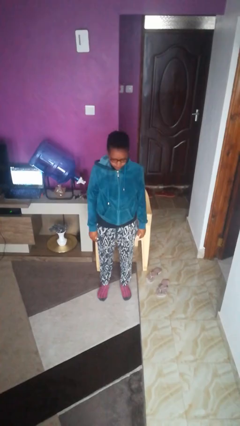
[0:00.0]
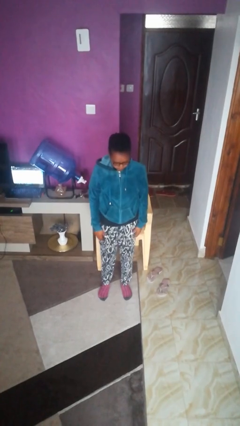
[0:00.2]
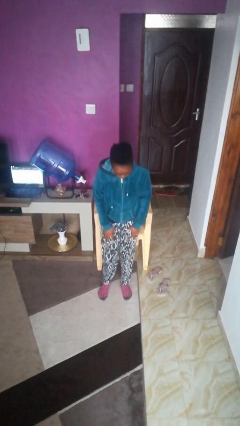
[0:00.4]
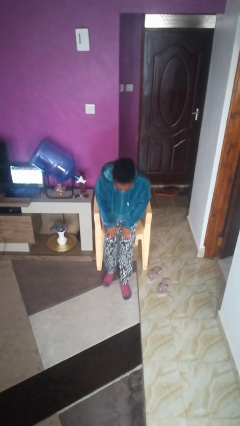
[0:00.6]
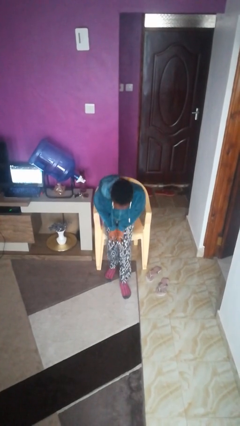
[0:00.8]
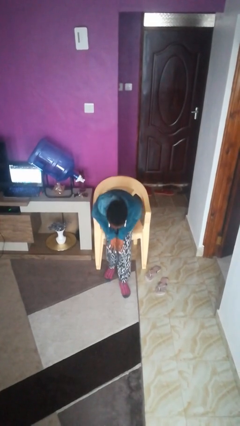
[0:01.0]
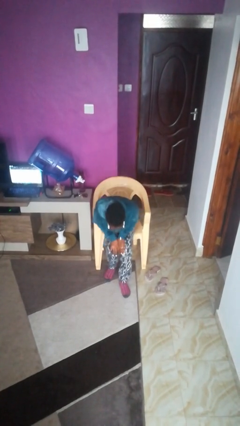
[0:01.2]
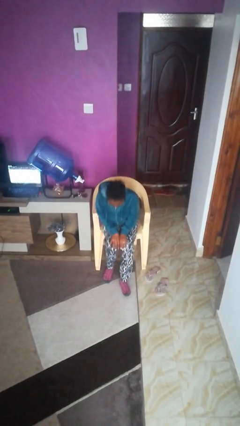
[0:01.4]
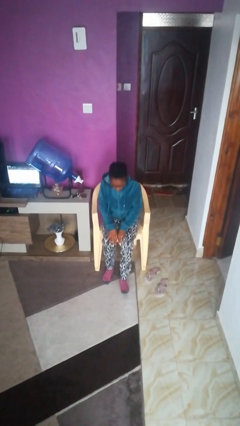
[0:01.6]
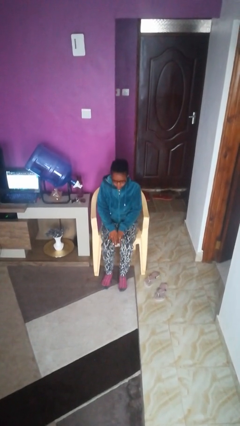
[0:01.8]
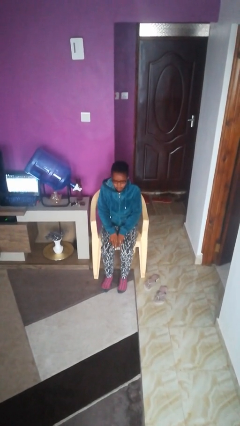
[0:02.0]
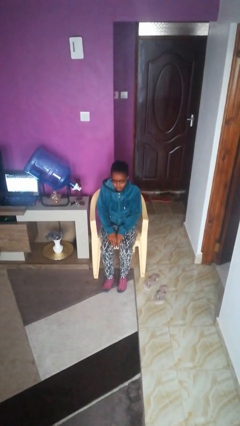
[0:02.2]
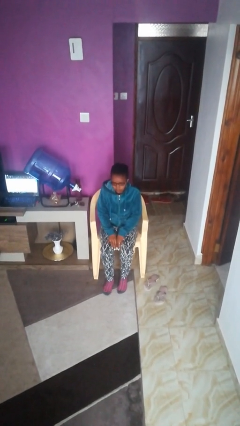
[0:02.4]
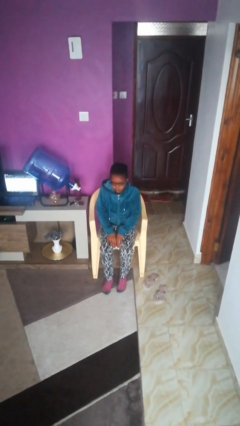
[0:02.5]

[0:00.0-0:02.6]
person sits down

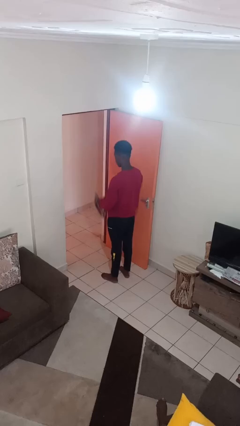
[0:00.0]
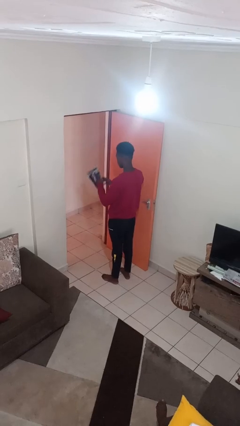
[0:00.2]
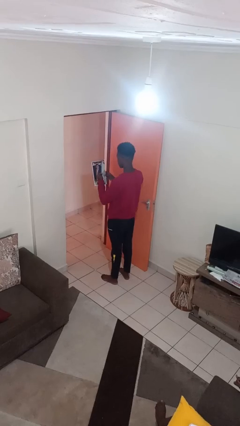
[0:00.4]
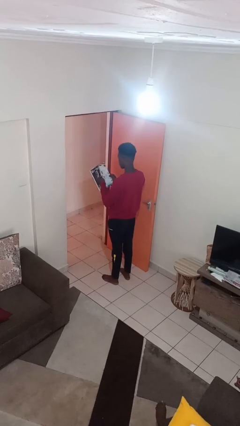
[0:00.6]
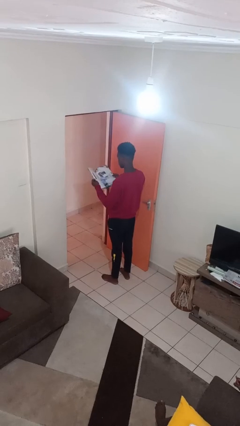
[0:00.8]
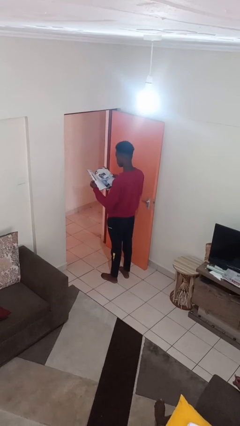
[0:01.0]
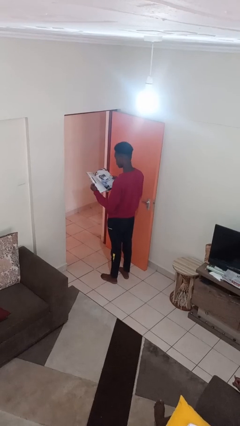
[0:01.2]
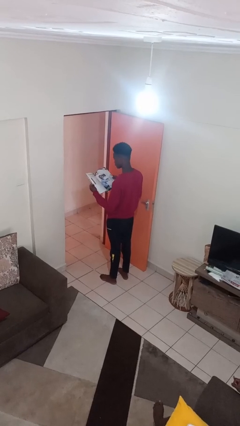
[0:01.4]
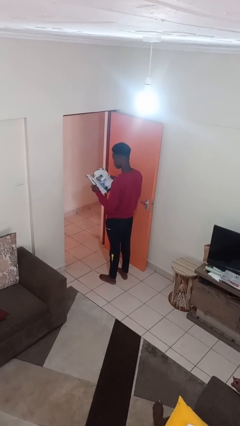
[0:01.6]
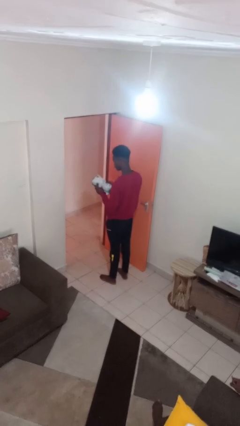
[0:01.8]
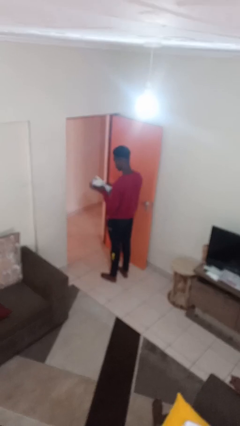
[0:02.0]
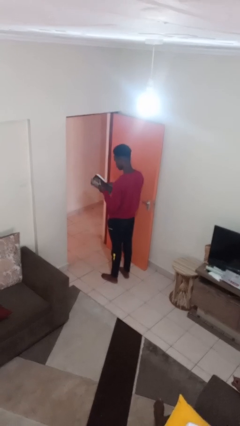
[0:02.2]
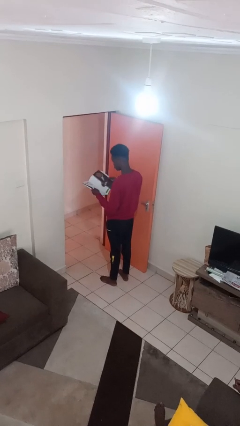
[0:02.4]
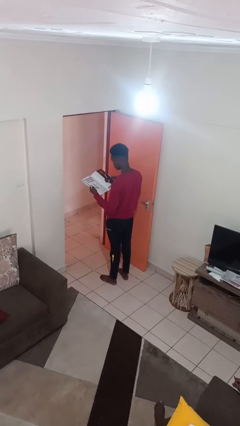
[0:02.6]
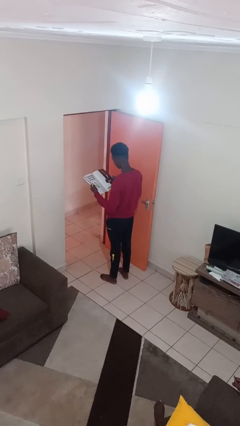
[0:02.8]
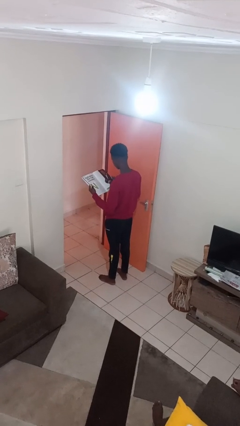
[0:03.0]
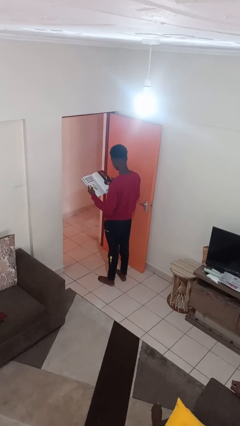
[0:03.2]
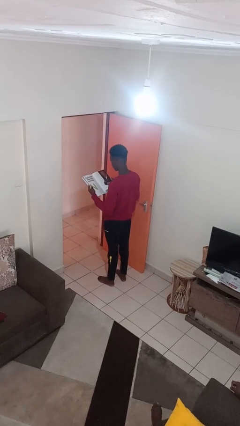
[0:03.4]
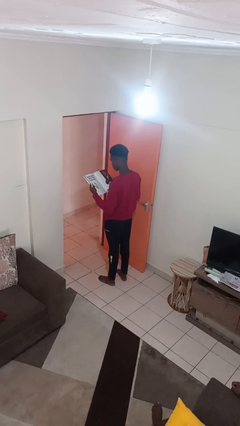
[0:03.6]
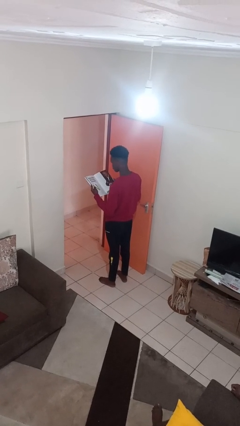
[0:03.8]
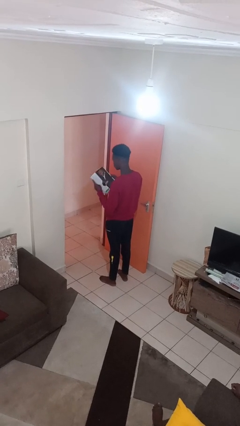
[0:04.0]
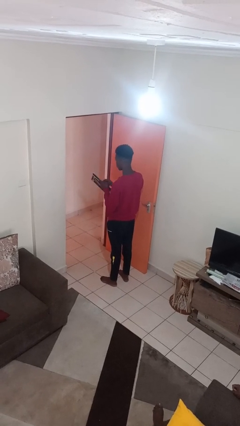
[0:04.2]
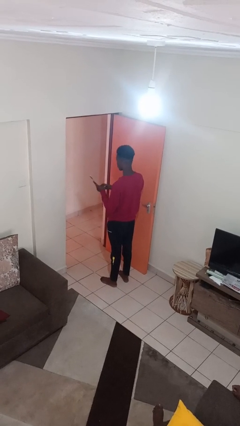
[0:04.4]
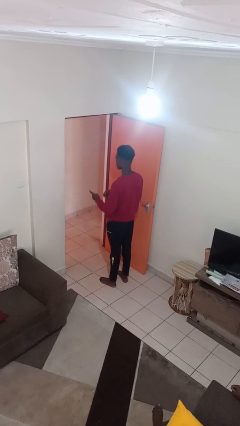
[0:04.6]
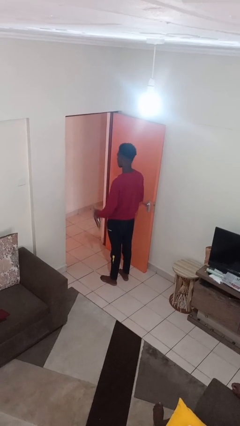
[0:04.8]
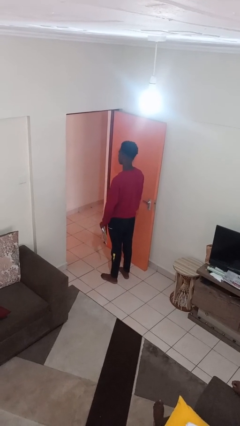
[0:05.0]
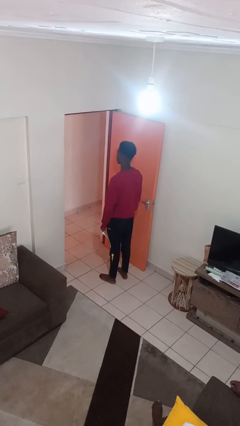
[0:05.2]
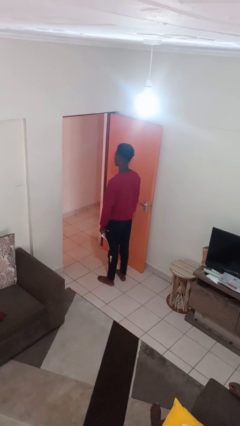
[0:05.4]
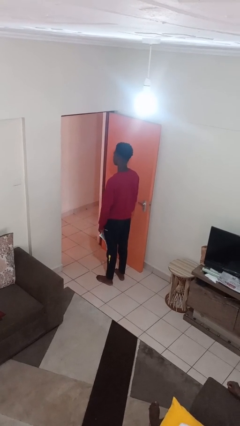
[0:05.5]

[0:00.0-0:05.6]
person reads magazine

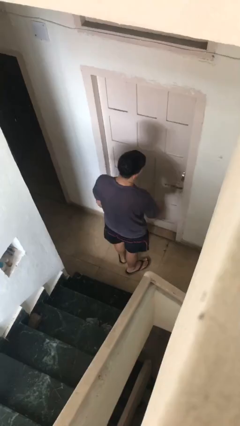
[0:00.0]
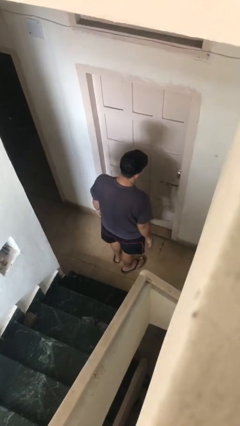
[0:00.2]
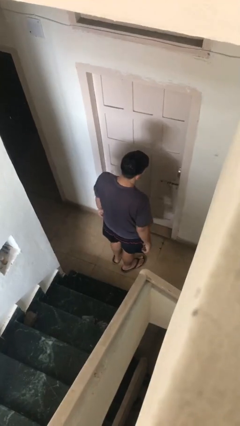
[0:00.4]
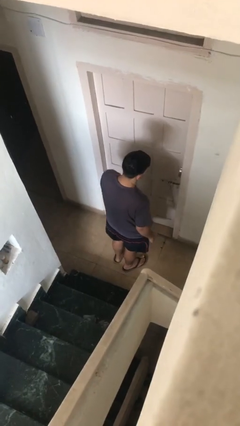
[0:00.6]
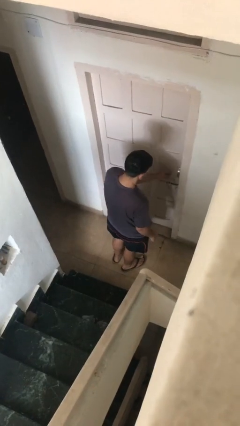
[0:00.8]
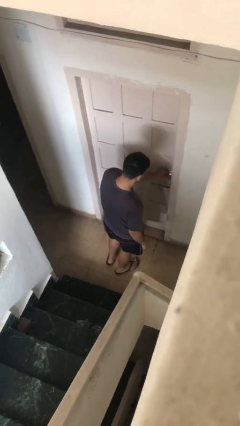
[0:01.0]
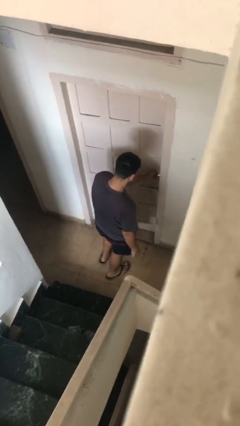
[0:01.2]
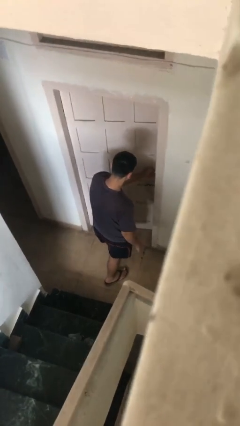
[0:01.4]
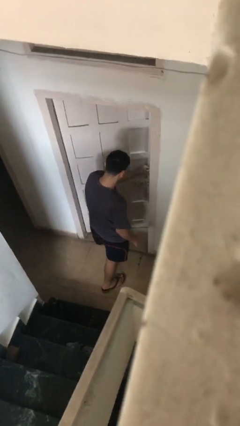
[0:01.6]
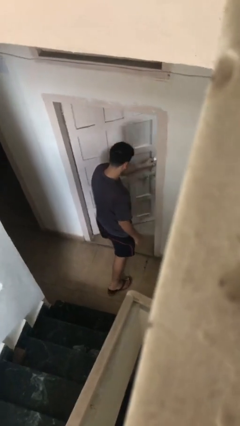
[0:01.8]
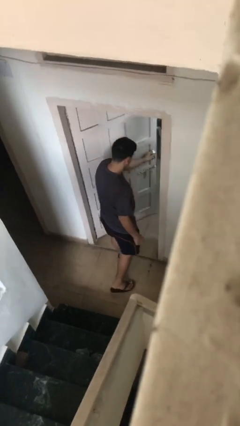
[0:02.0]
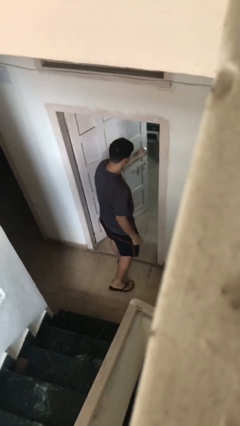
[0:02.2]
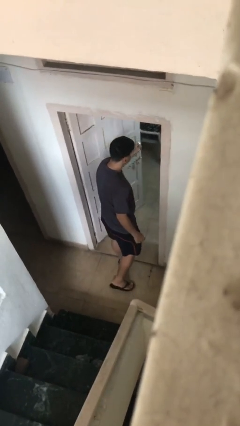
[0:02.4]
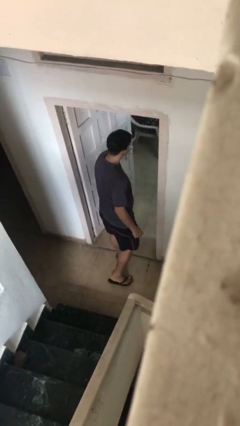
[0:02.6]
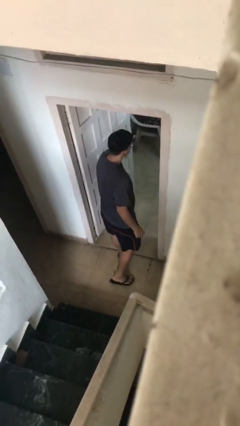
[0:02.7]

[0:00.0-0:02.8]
person opens facility door

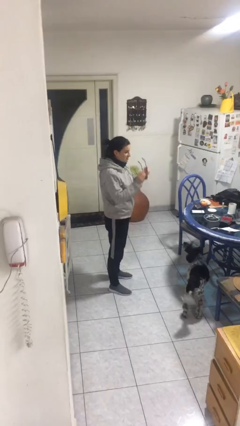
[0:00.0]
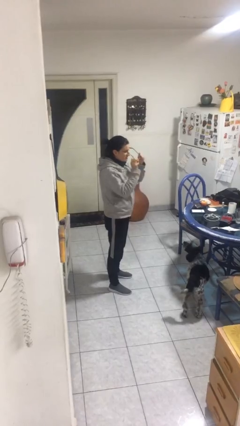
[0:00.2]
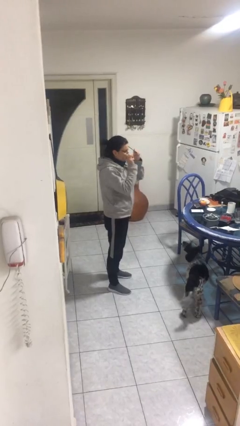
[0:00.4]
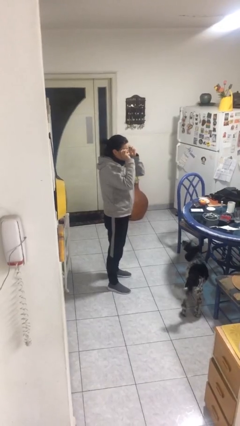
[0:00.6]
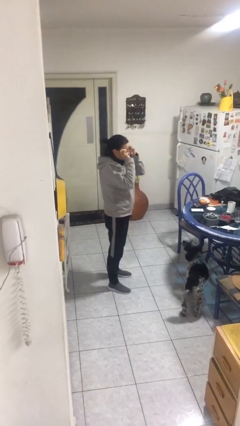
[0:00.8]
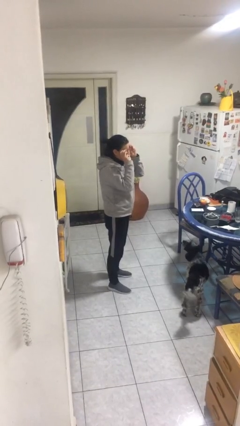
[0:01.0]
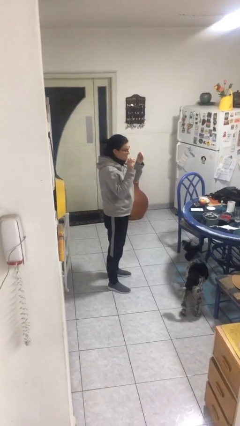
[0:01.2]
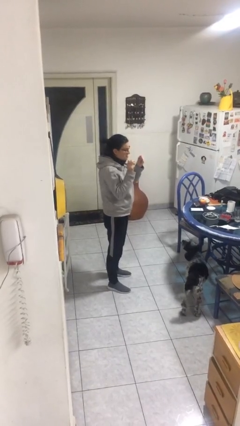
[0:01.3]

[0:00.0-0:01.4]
person puts on glasses

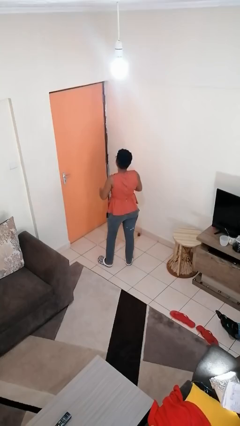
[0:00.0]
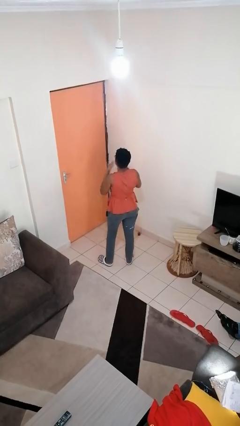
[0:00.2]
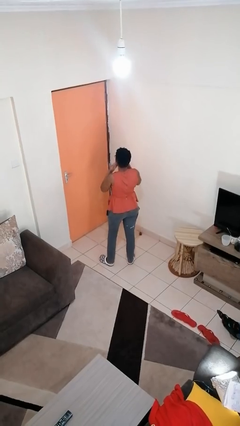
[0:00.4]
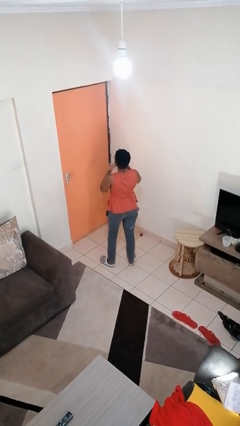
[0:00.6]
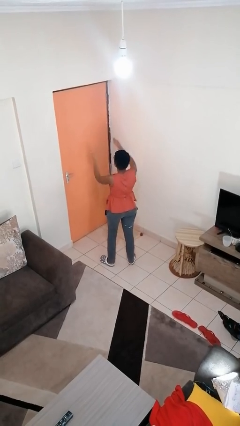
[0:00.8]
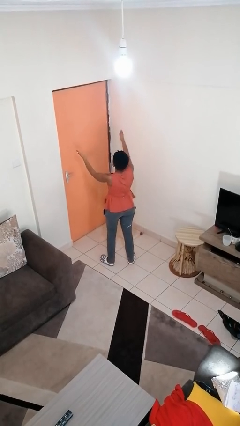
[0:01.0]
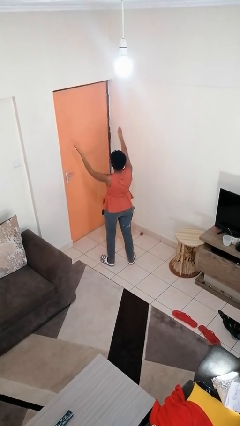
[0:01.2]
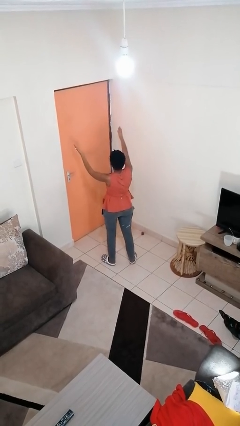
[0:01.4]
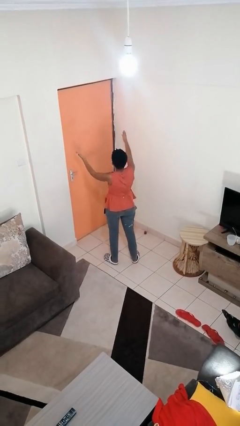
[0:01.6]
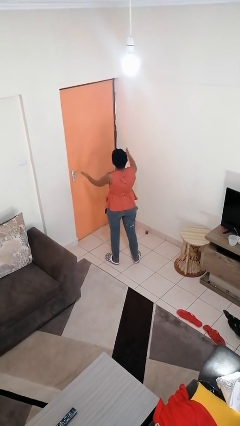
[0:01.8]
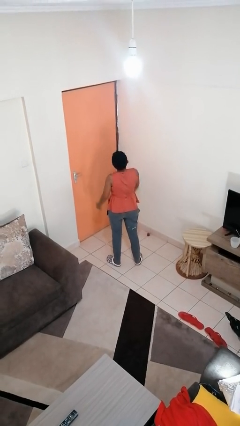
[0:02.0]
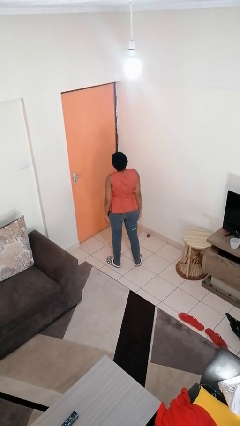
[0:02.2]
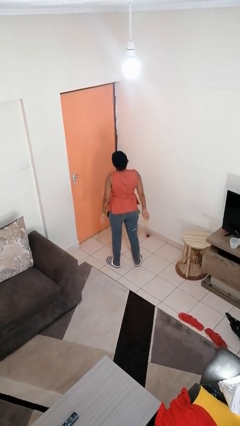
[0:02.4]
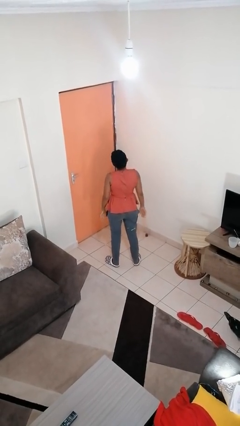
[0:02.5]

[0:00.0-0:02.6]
person gestures blow kiss

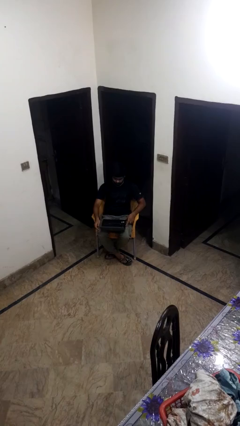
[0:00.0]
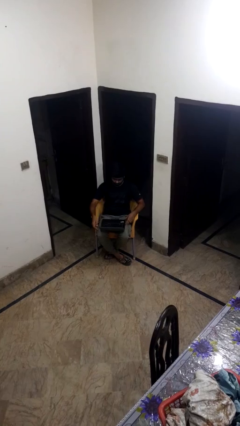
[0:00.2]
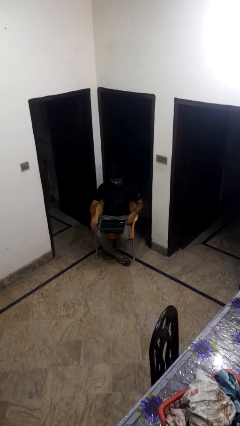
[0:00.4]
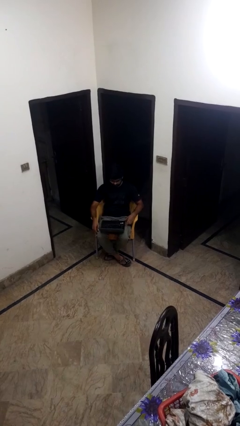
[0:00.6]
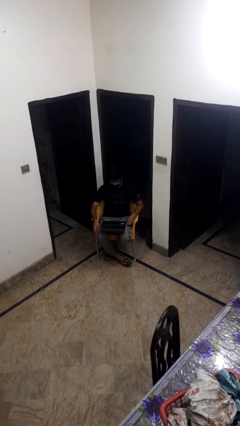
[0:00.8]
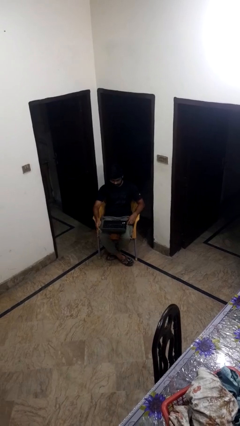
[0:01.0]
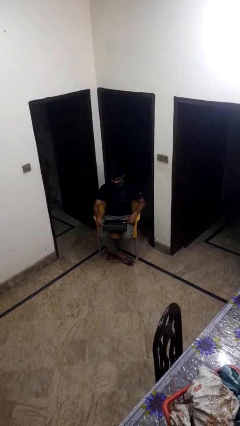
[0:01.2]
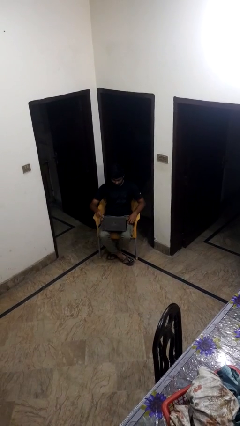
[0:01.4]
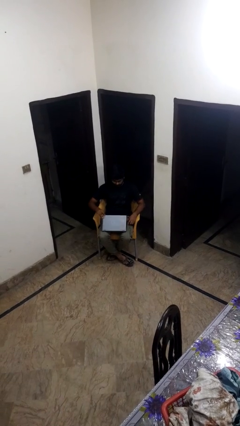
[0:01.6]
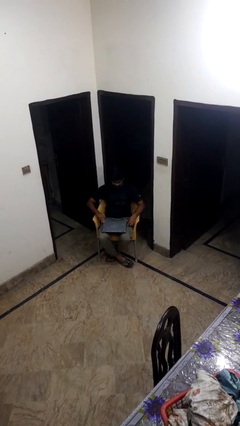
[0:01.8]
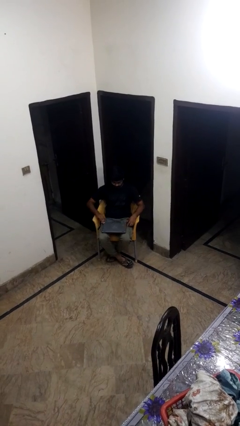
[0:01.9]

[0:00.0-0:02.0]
person closes laptop

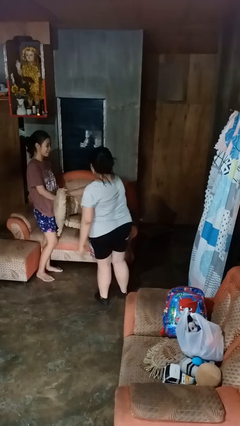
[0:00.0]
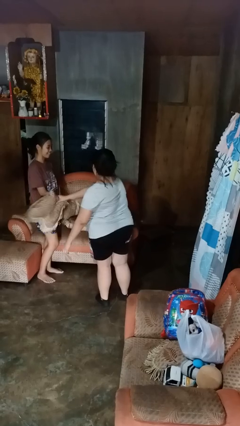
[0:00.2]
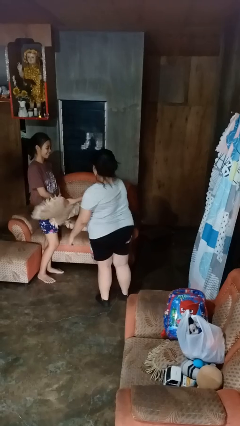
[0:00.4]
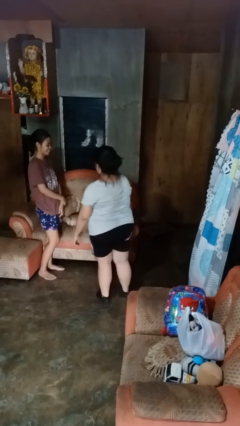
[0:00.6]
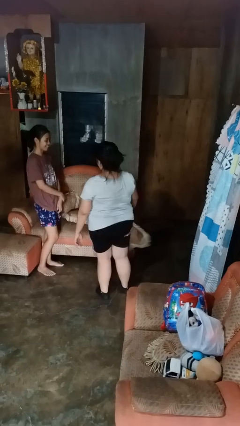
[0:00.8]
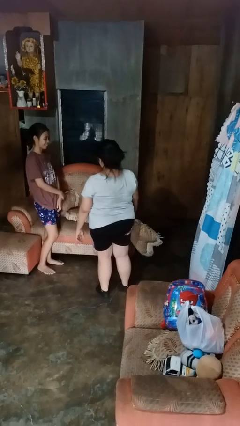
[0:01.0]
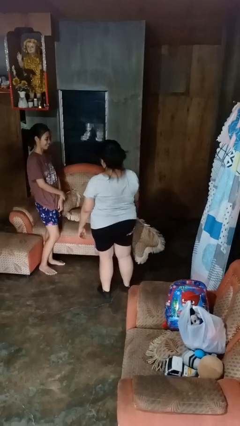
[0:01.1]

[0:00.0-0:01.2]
person hits person with pillow
